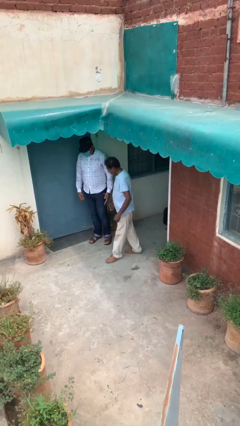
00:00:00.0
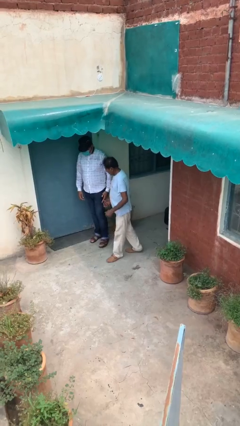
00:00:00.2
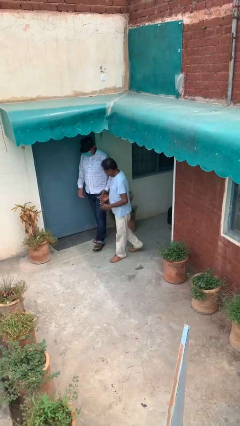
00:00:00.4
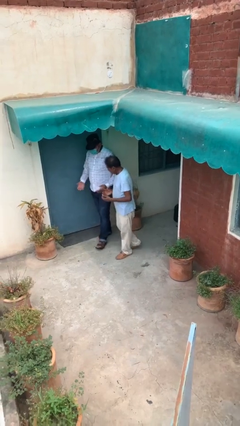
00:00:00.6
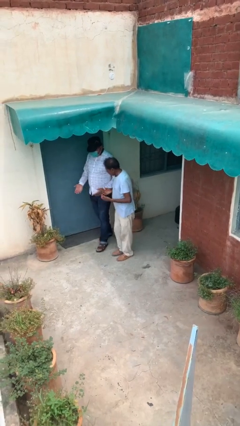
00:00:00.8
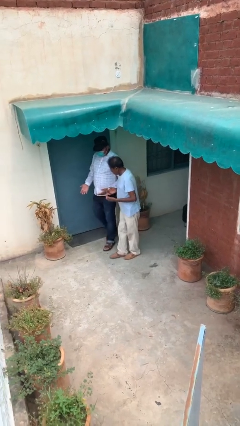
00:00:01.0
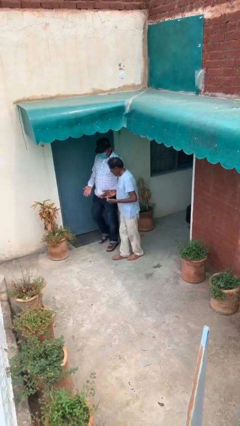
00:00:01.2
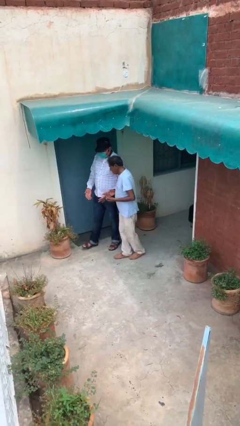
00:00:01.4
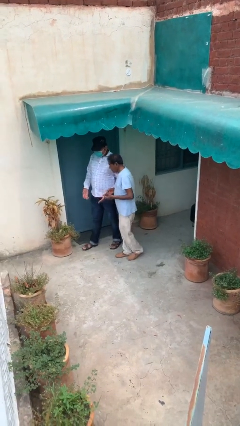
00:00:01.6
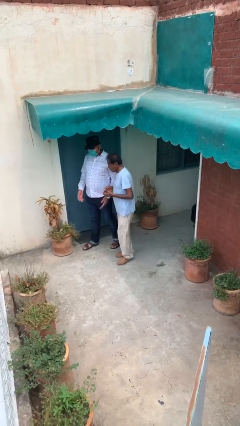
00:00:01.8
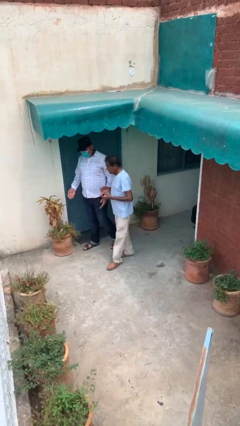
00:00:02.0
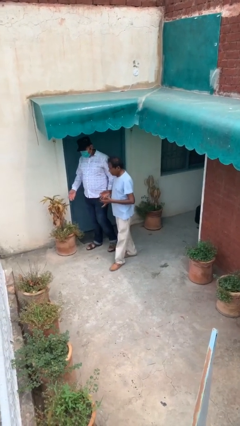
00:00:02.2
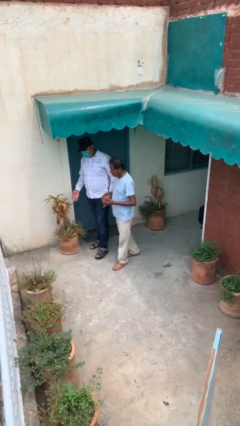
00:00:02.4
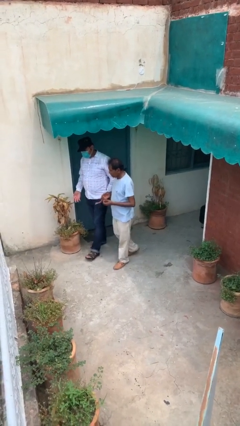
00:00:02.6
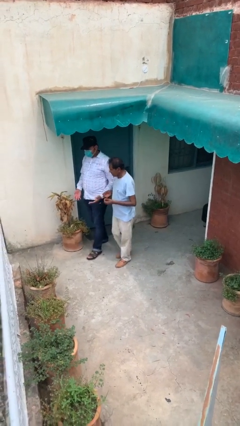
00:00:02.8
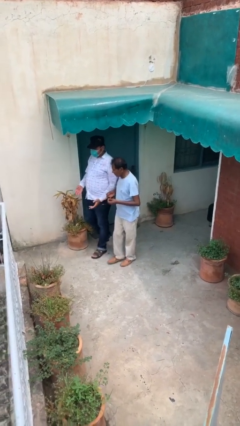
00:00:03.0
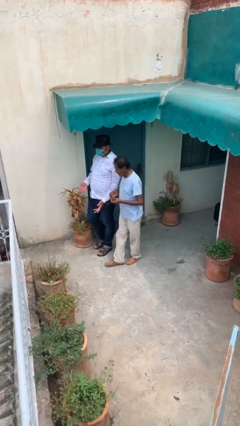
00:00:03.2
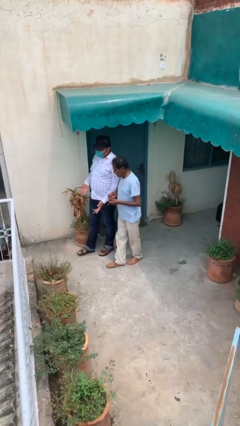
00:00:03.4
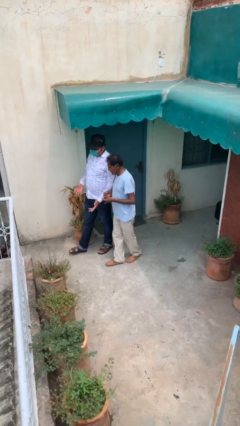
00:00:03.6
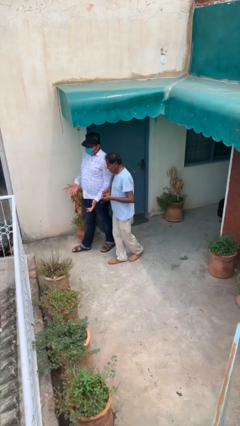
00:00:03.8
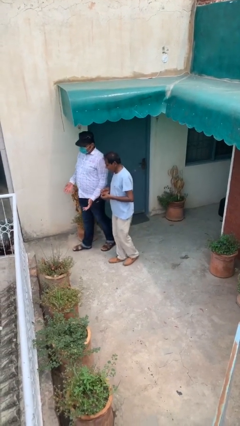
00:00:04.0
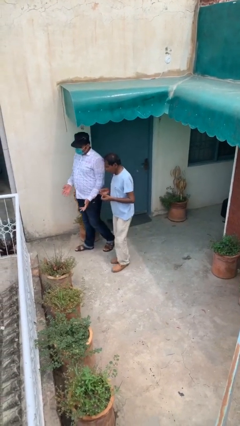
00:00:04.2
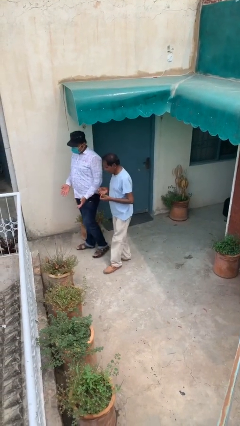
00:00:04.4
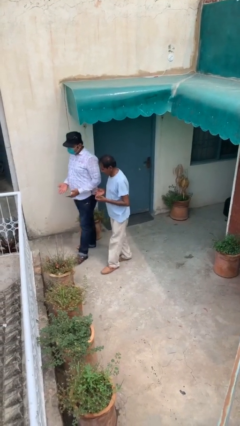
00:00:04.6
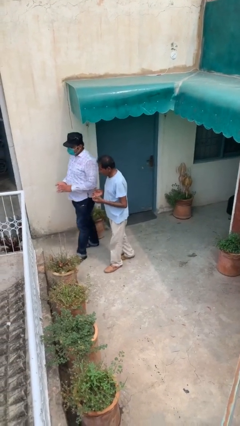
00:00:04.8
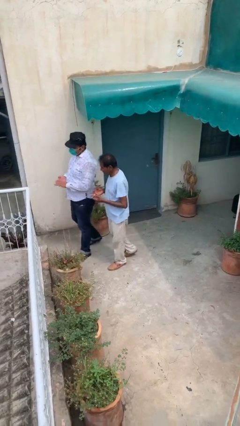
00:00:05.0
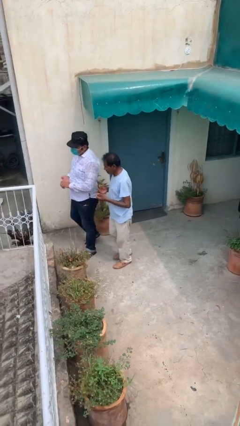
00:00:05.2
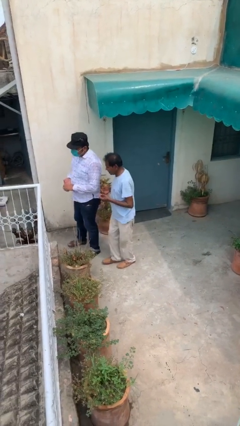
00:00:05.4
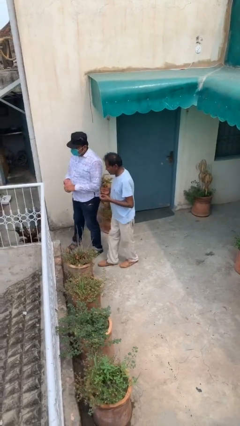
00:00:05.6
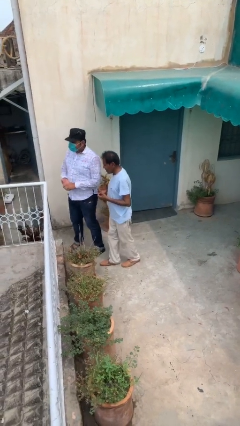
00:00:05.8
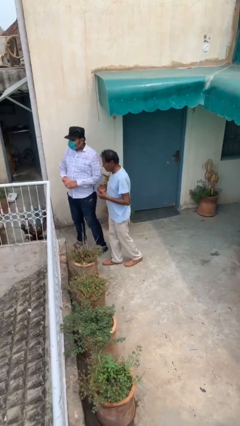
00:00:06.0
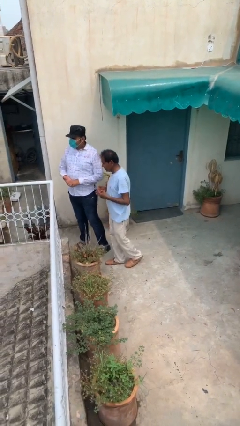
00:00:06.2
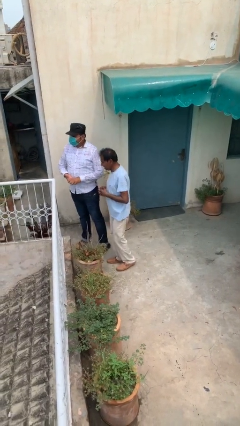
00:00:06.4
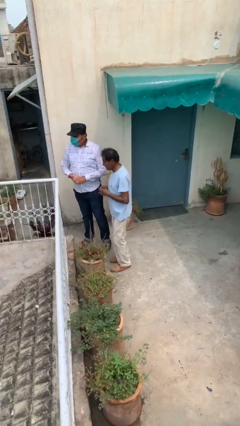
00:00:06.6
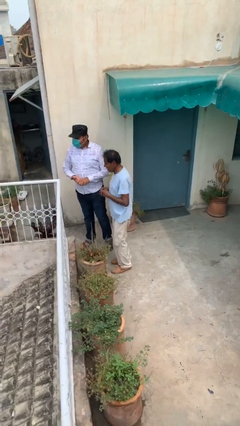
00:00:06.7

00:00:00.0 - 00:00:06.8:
person talks to person

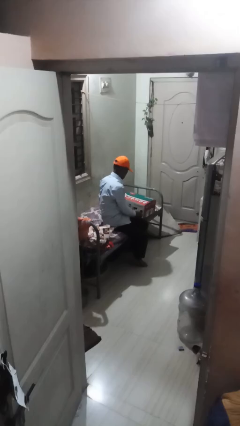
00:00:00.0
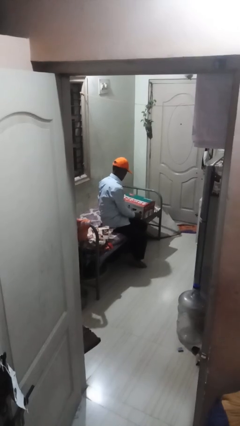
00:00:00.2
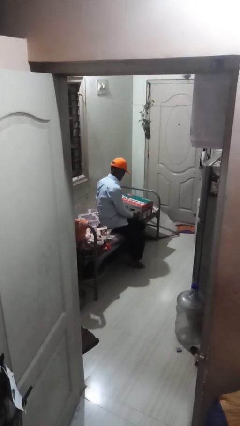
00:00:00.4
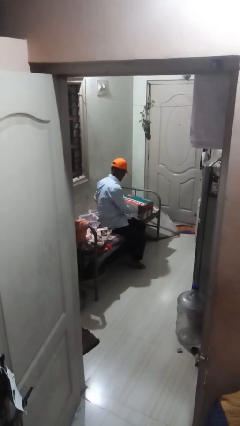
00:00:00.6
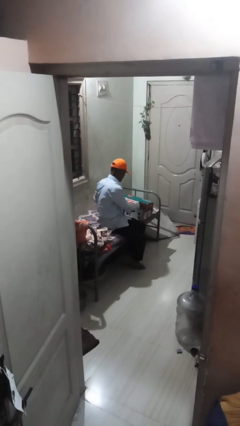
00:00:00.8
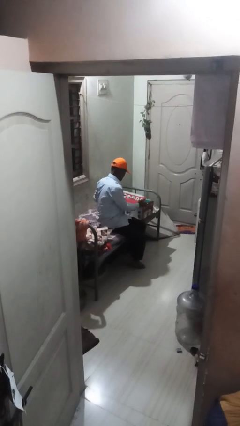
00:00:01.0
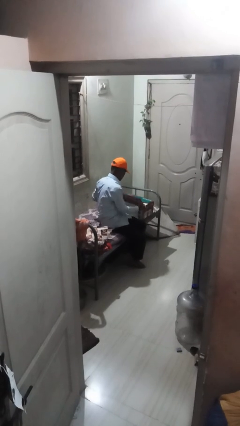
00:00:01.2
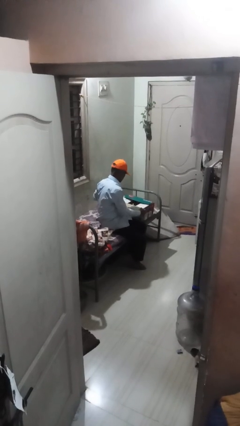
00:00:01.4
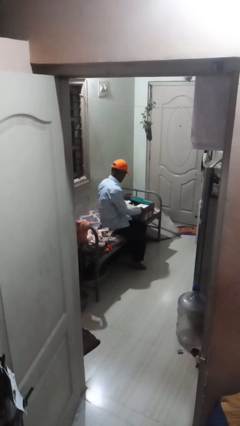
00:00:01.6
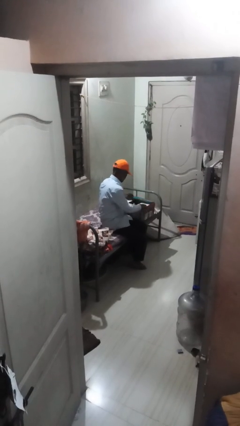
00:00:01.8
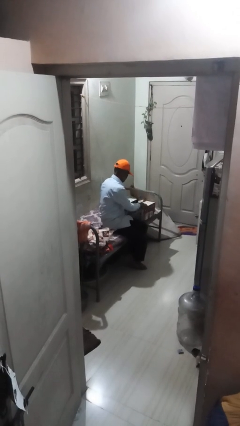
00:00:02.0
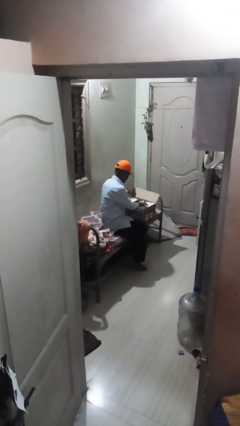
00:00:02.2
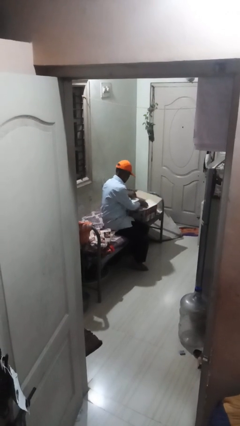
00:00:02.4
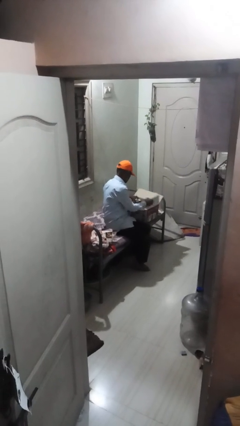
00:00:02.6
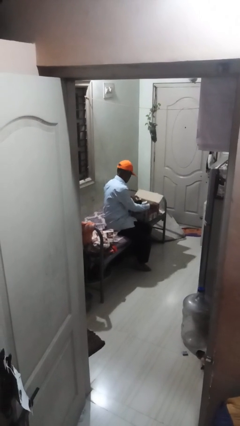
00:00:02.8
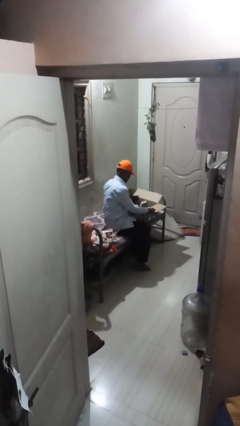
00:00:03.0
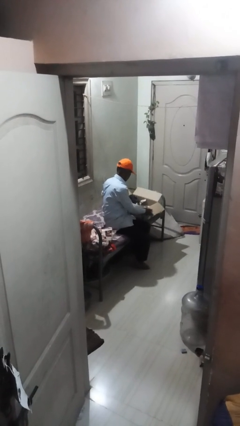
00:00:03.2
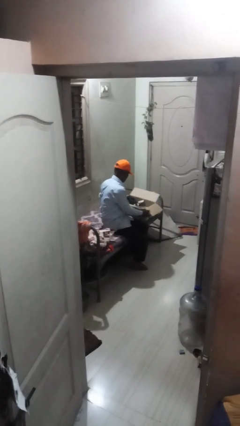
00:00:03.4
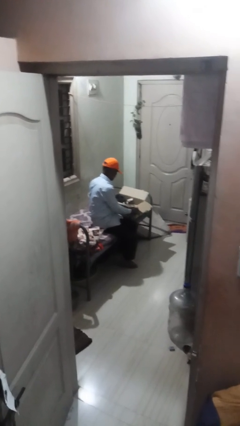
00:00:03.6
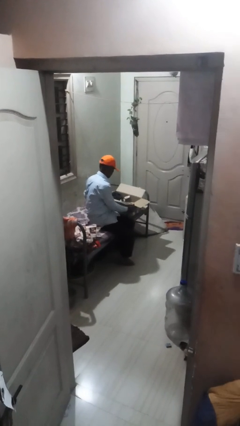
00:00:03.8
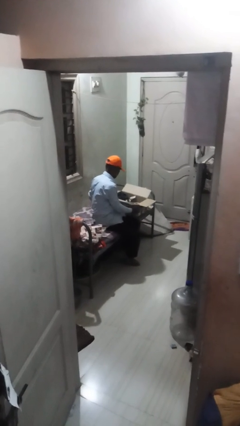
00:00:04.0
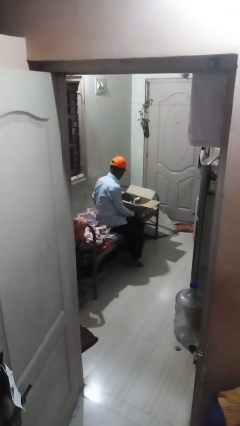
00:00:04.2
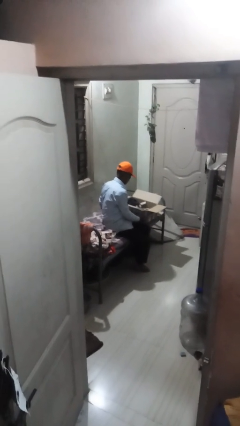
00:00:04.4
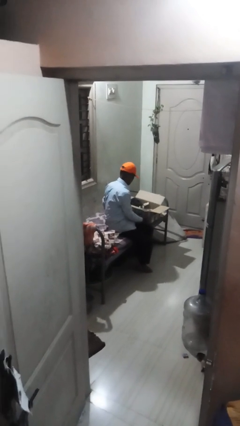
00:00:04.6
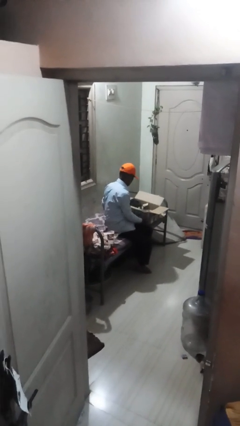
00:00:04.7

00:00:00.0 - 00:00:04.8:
person opens box

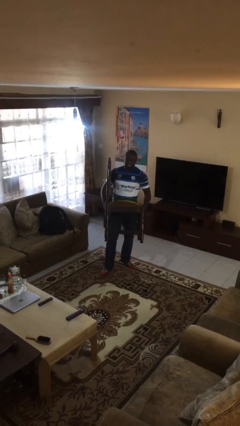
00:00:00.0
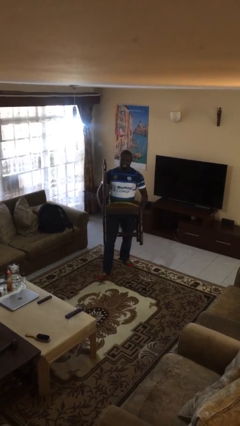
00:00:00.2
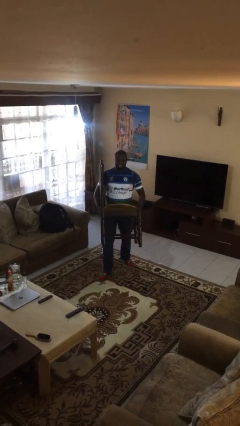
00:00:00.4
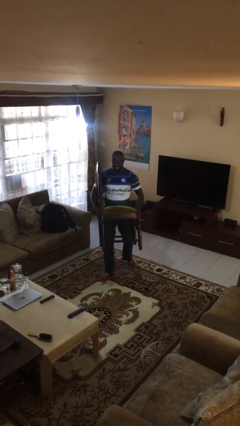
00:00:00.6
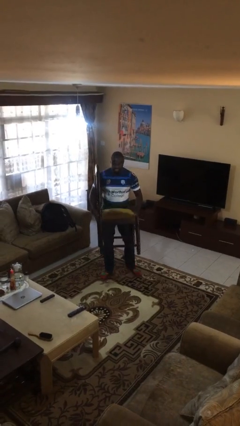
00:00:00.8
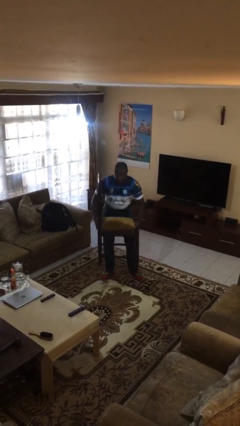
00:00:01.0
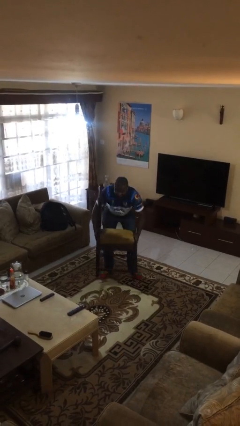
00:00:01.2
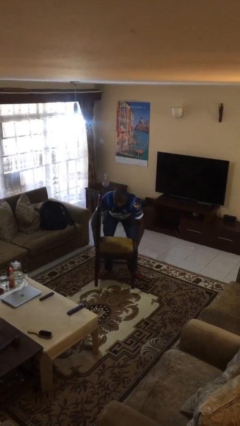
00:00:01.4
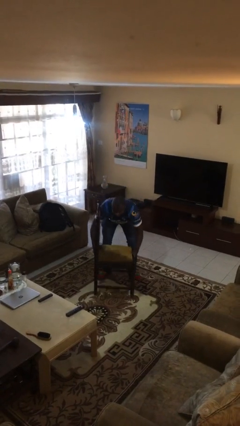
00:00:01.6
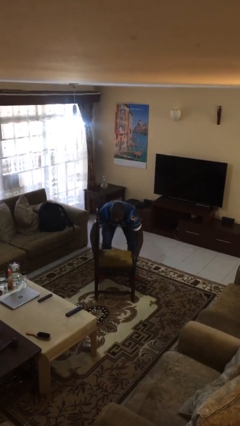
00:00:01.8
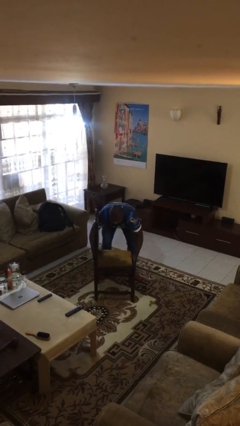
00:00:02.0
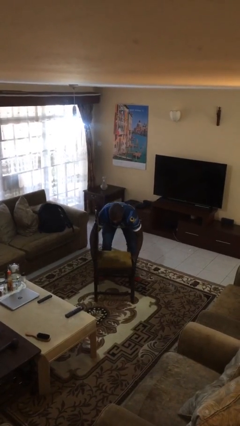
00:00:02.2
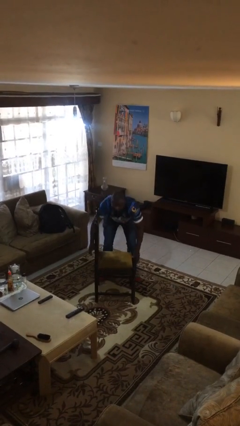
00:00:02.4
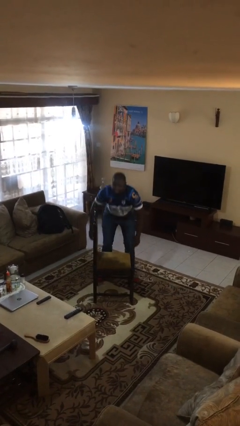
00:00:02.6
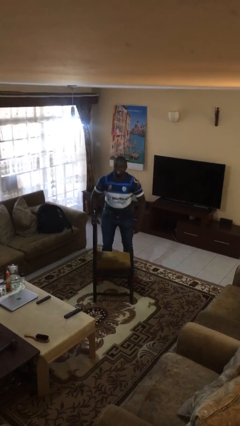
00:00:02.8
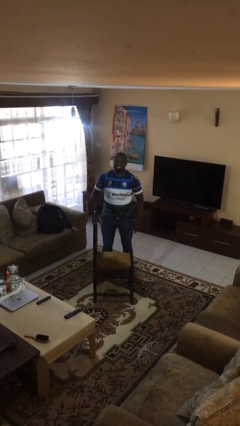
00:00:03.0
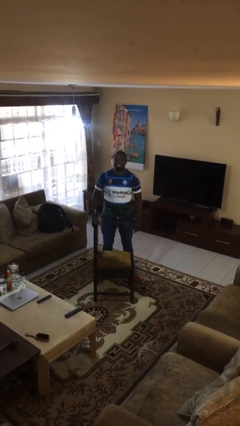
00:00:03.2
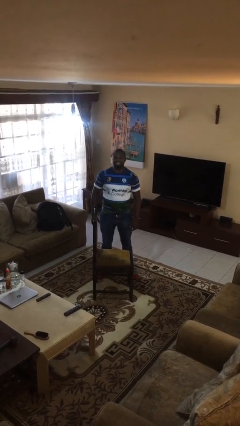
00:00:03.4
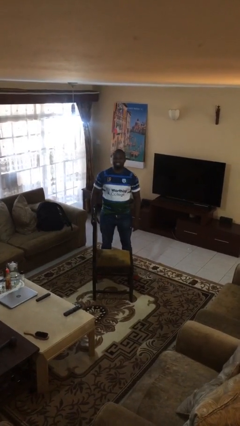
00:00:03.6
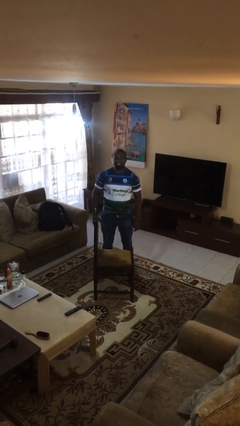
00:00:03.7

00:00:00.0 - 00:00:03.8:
person puts down object on floor

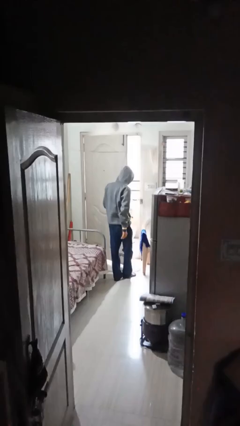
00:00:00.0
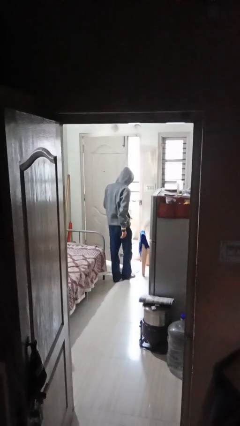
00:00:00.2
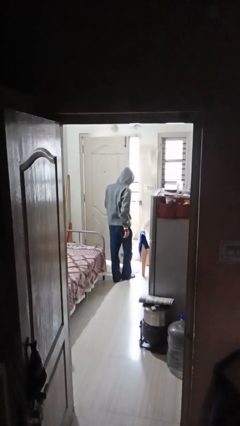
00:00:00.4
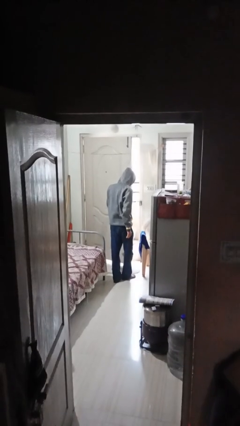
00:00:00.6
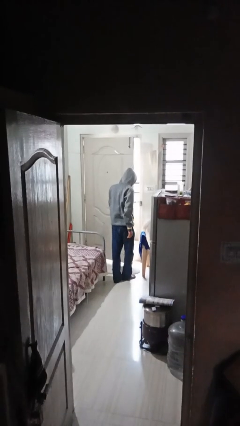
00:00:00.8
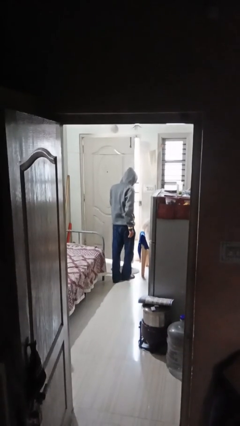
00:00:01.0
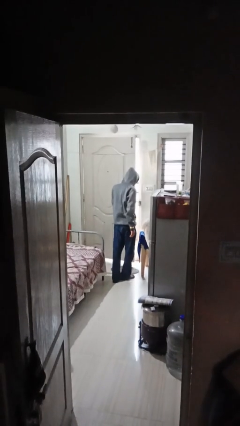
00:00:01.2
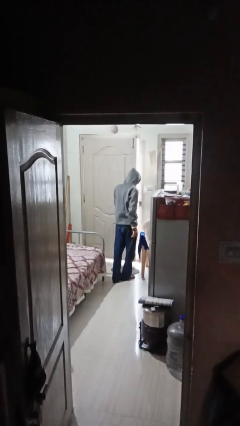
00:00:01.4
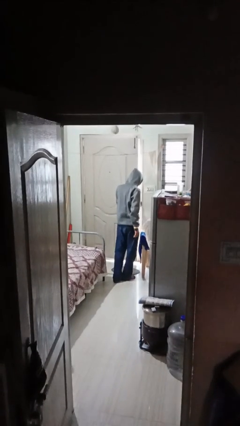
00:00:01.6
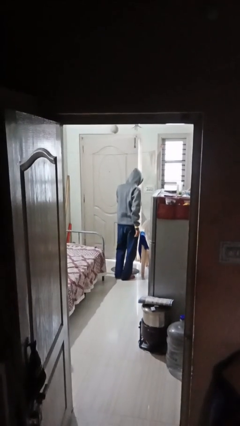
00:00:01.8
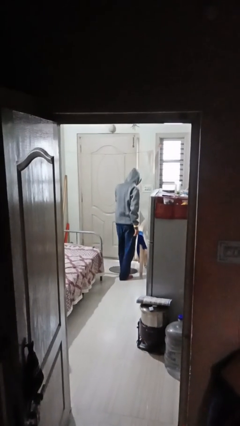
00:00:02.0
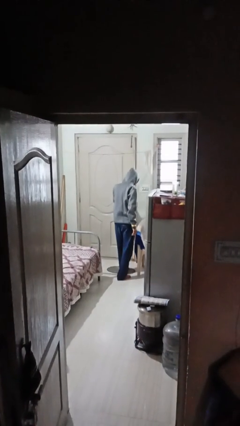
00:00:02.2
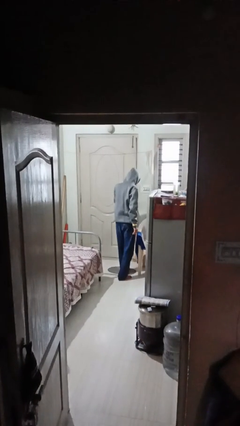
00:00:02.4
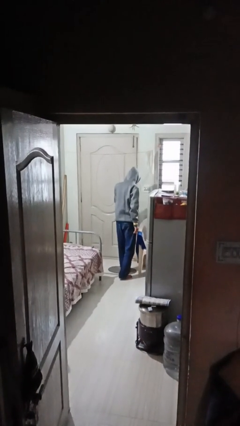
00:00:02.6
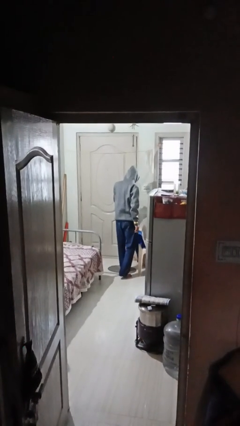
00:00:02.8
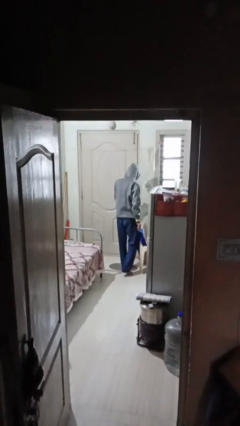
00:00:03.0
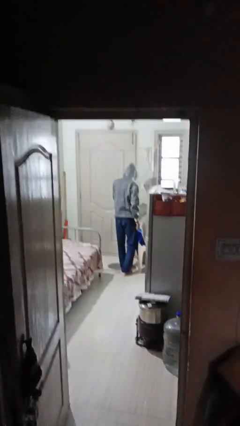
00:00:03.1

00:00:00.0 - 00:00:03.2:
person closes facility door
